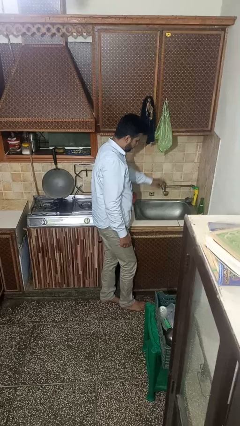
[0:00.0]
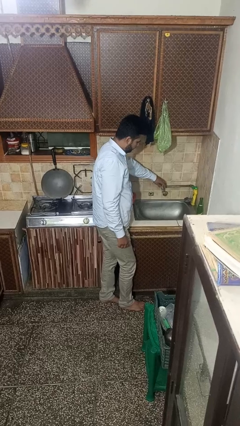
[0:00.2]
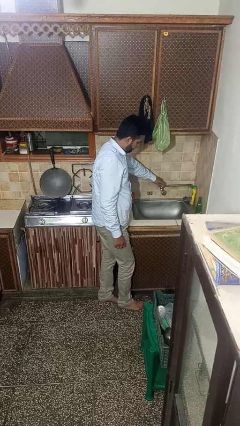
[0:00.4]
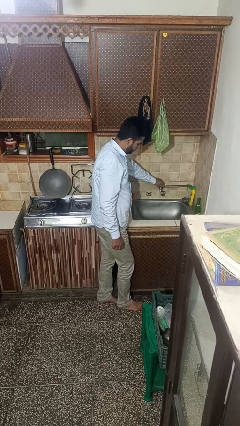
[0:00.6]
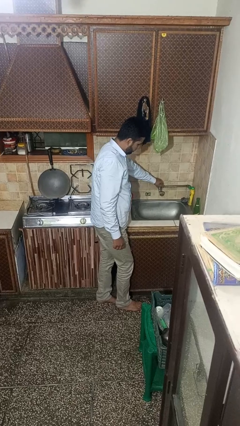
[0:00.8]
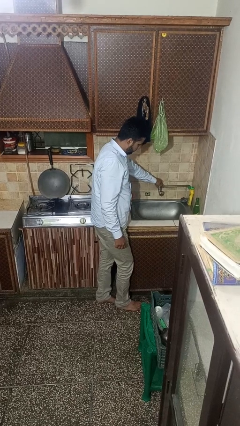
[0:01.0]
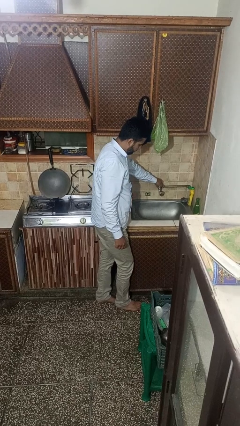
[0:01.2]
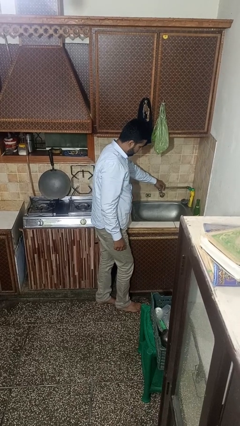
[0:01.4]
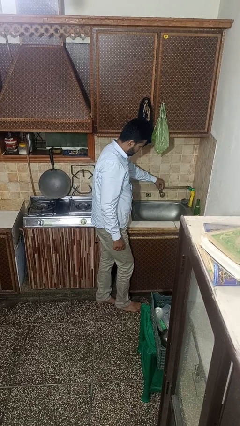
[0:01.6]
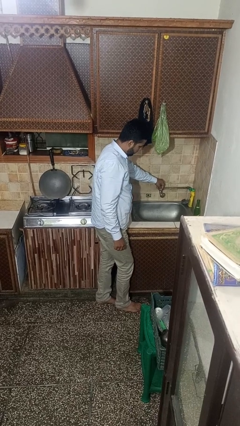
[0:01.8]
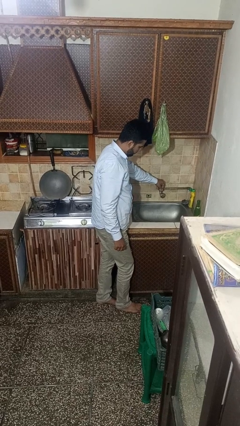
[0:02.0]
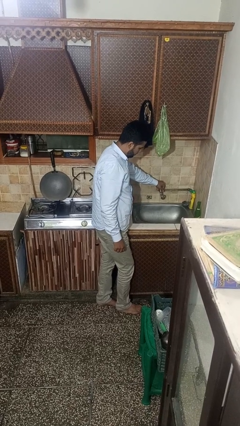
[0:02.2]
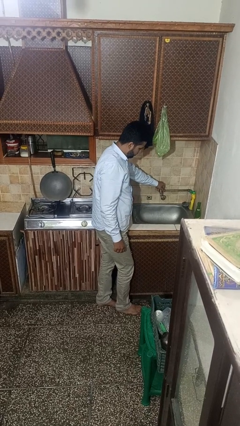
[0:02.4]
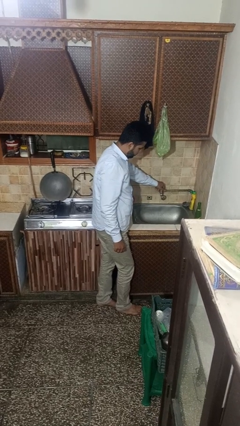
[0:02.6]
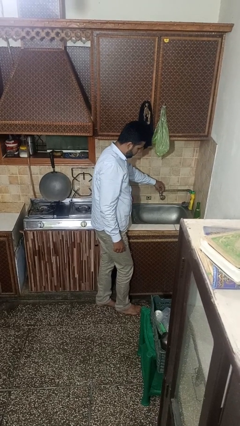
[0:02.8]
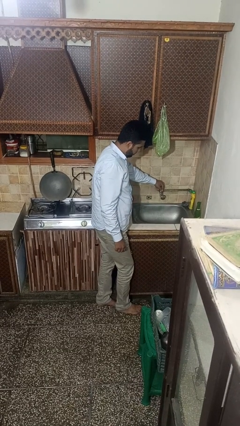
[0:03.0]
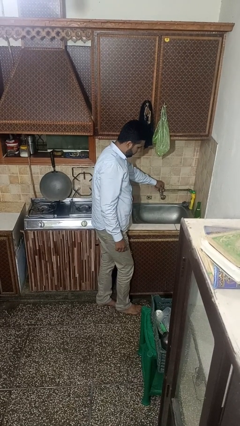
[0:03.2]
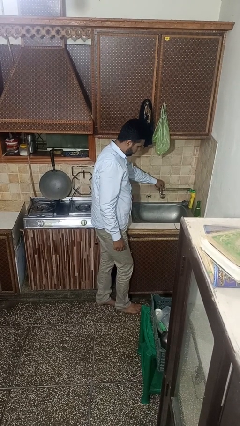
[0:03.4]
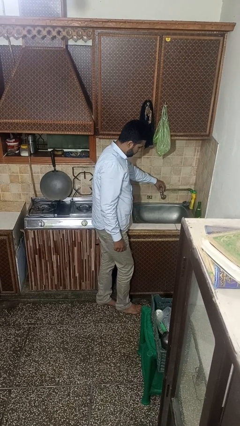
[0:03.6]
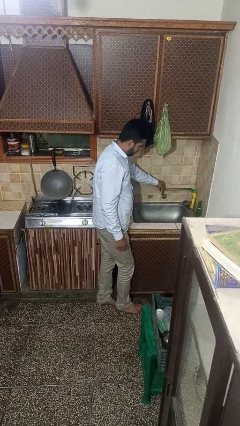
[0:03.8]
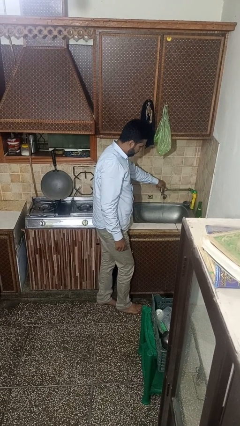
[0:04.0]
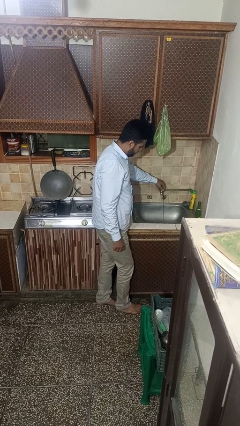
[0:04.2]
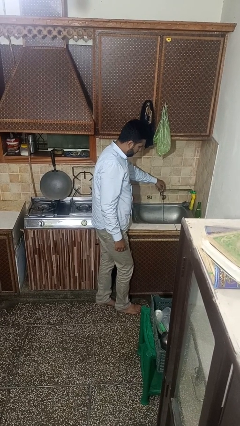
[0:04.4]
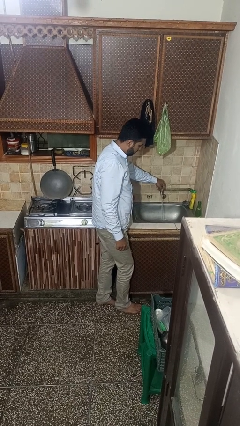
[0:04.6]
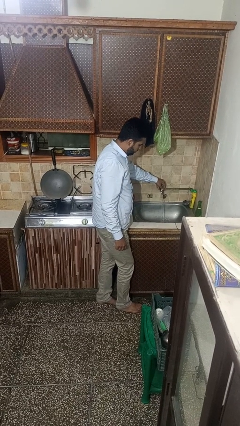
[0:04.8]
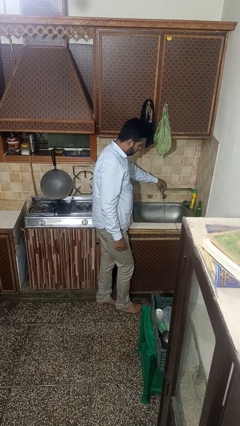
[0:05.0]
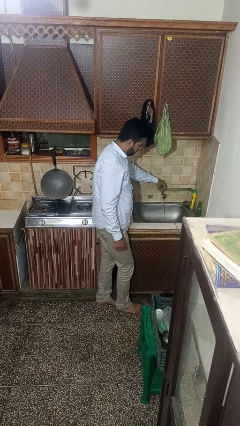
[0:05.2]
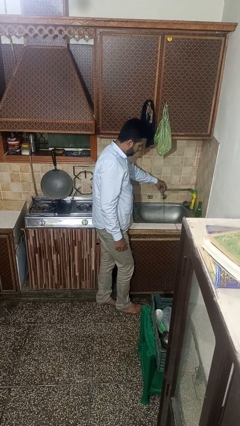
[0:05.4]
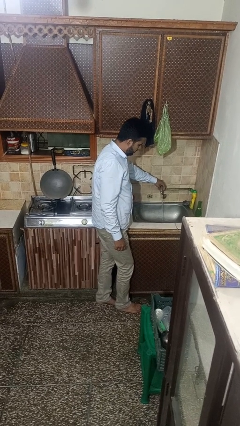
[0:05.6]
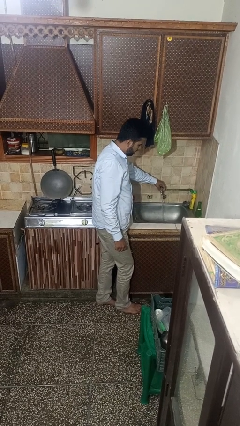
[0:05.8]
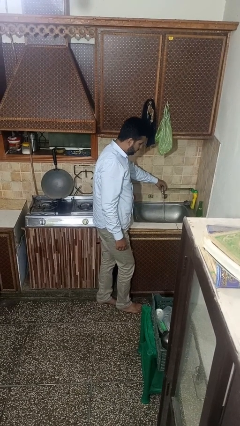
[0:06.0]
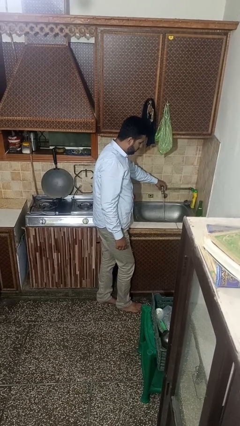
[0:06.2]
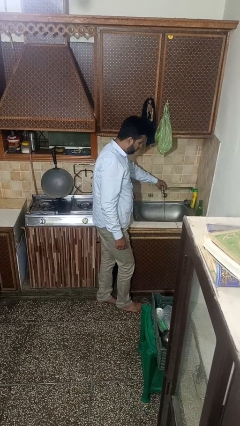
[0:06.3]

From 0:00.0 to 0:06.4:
person turns on faucet

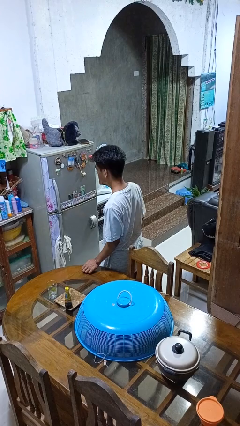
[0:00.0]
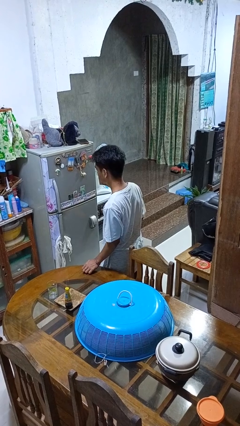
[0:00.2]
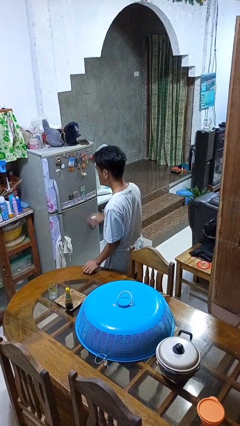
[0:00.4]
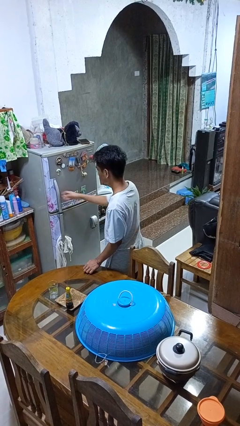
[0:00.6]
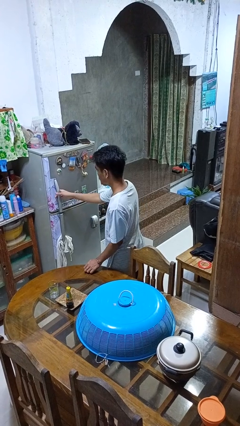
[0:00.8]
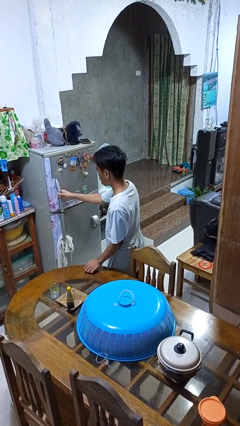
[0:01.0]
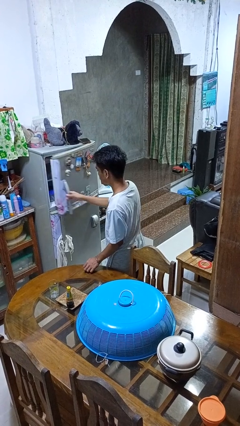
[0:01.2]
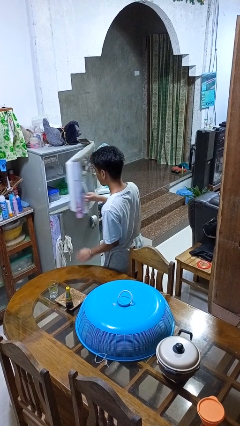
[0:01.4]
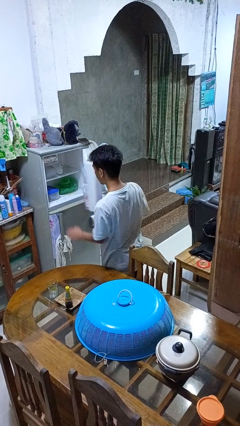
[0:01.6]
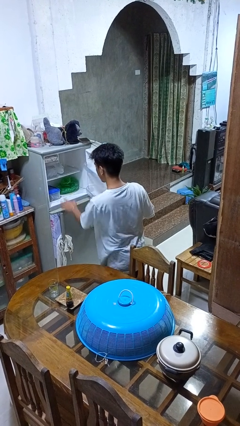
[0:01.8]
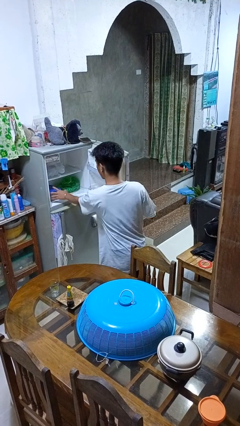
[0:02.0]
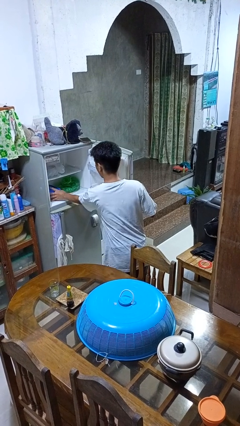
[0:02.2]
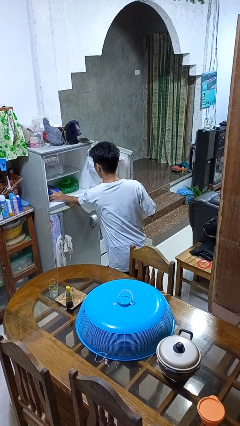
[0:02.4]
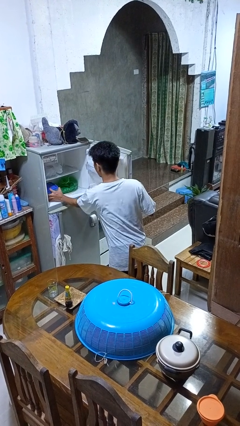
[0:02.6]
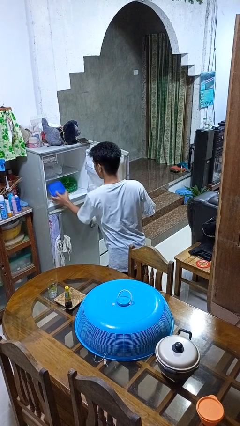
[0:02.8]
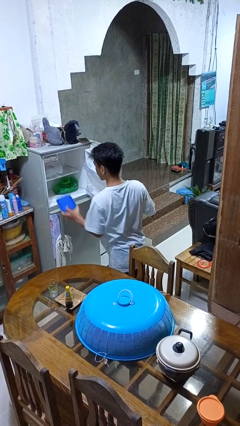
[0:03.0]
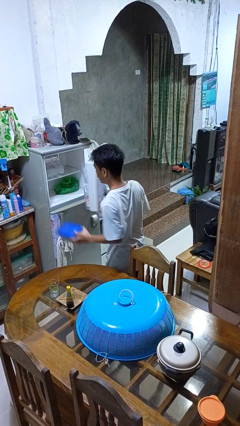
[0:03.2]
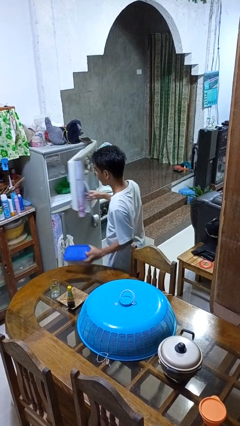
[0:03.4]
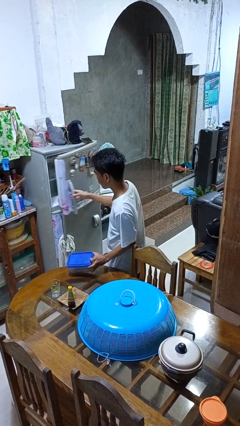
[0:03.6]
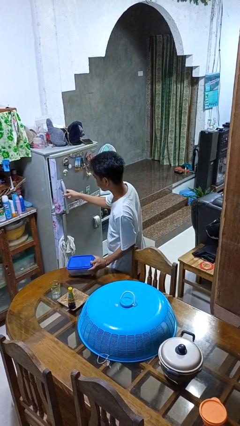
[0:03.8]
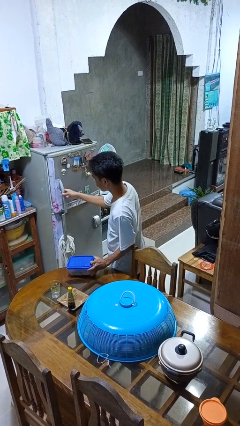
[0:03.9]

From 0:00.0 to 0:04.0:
person takes object from refrigerator

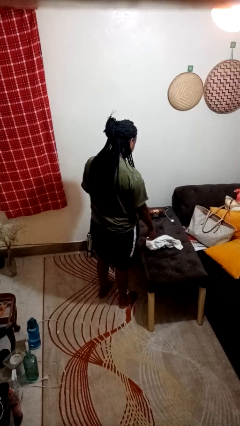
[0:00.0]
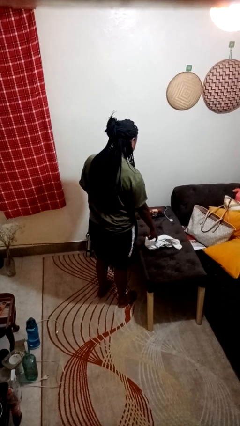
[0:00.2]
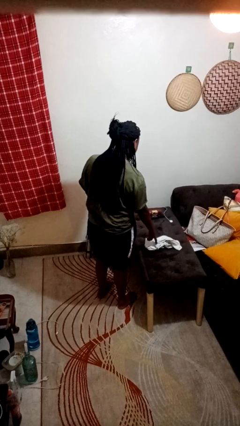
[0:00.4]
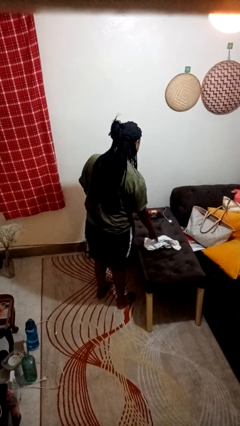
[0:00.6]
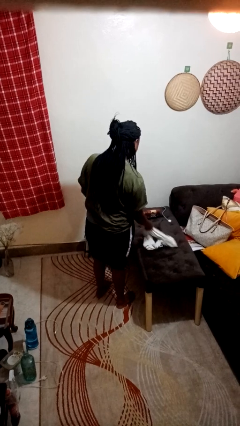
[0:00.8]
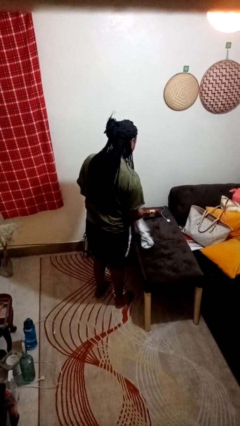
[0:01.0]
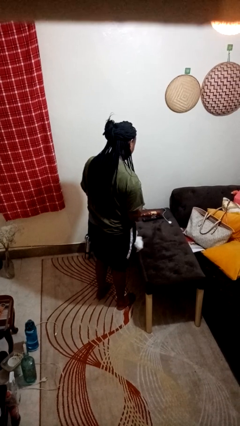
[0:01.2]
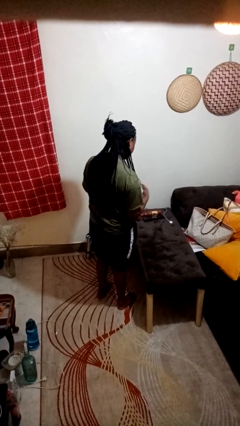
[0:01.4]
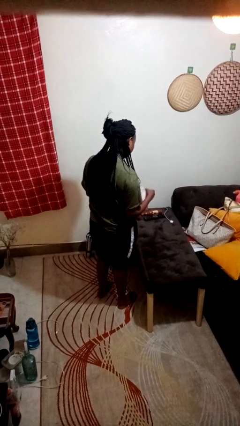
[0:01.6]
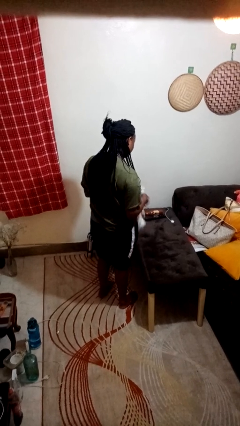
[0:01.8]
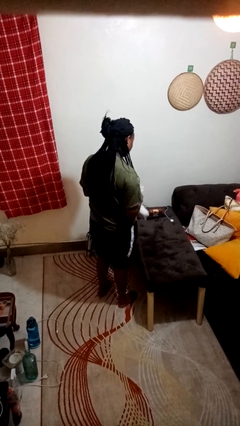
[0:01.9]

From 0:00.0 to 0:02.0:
person picks up object from table

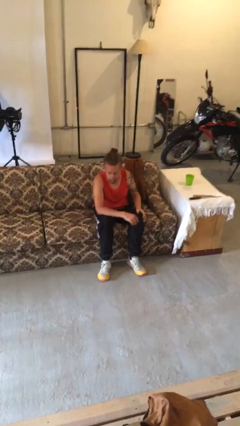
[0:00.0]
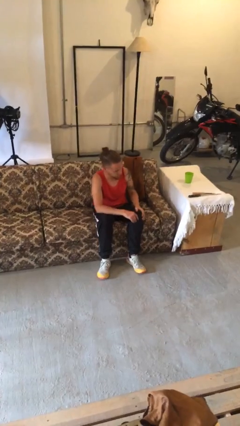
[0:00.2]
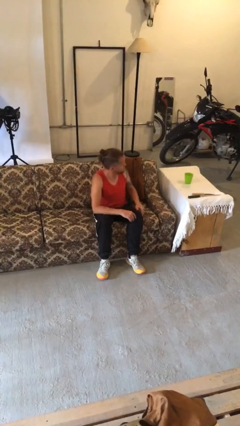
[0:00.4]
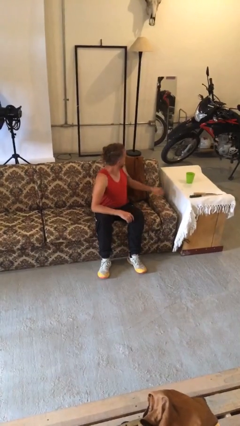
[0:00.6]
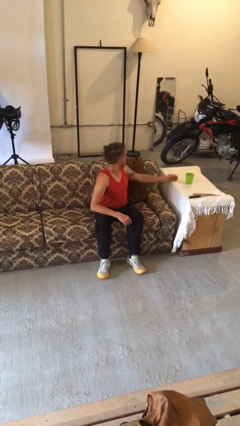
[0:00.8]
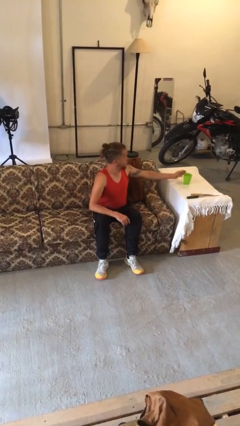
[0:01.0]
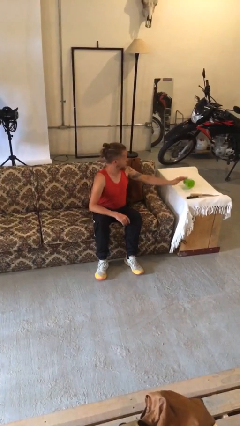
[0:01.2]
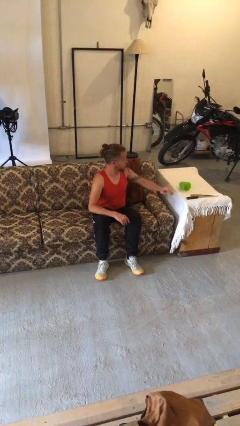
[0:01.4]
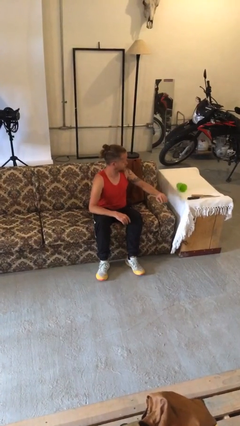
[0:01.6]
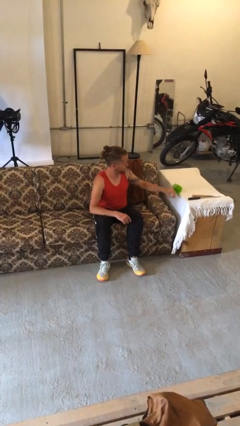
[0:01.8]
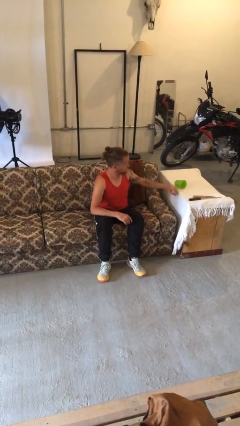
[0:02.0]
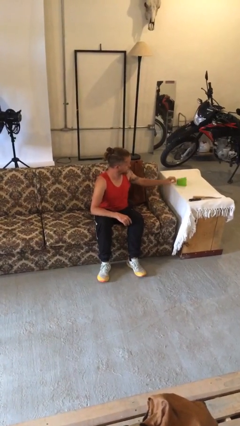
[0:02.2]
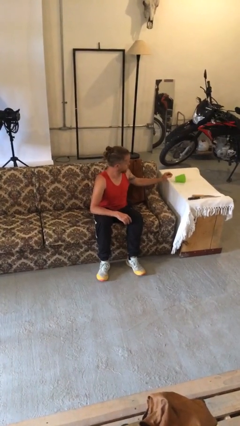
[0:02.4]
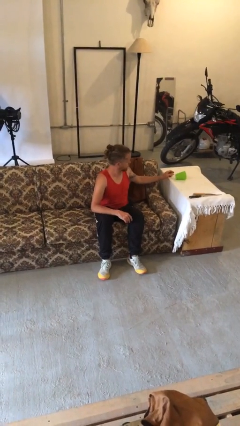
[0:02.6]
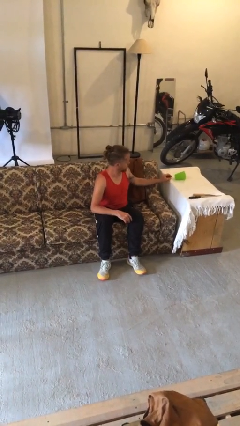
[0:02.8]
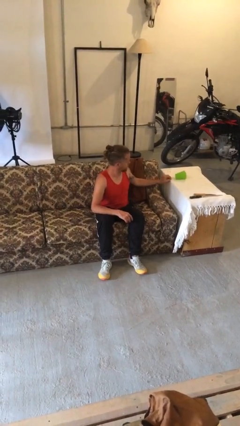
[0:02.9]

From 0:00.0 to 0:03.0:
person knocks over glass

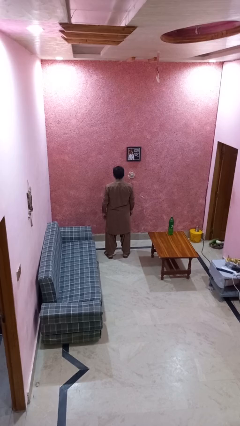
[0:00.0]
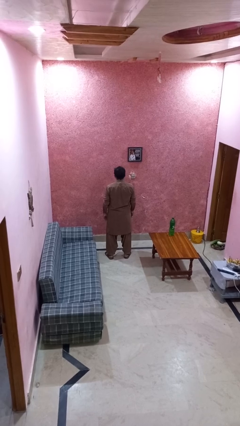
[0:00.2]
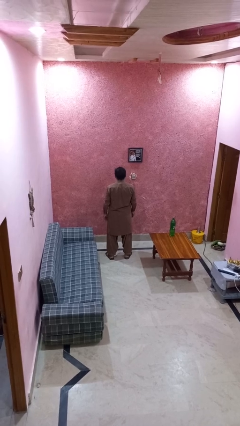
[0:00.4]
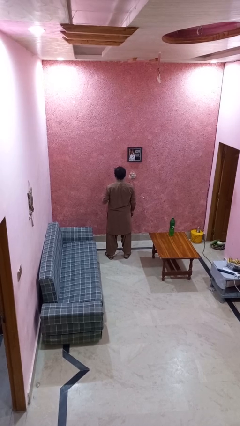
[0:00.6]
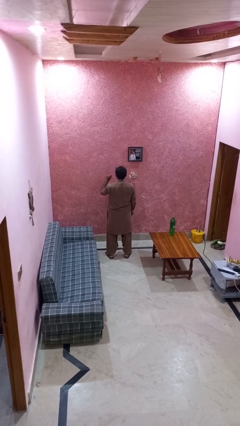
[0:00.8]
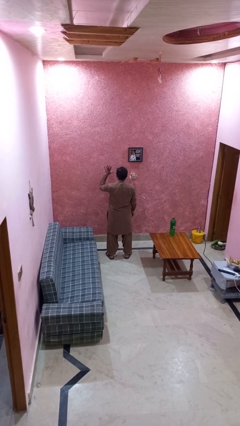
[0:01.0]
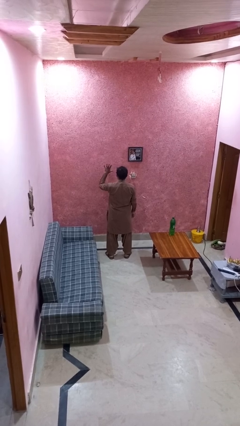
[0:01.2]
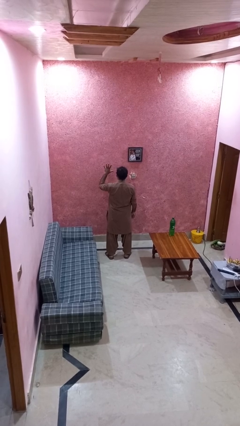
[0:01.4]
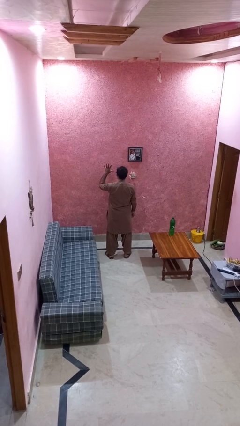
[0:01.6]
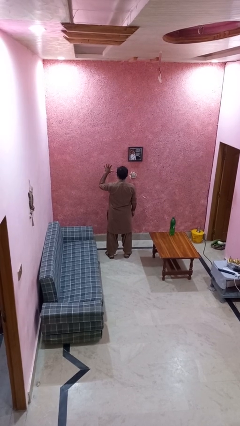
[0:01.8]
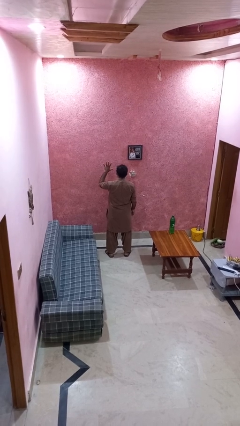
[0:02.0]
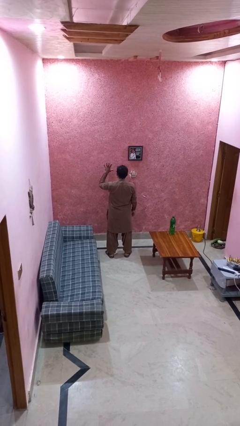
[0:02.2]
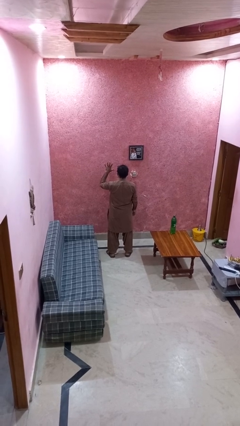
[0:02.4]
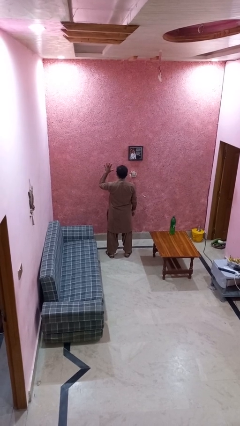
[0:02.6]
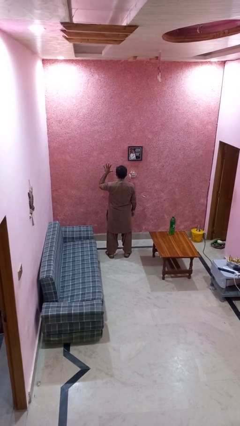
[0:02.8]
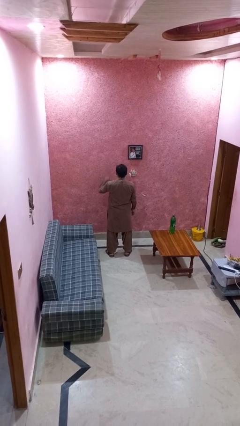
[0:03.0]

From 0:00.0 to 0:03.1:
person gestures number five
